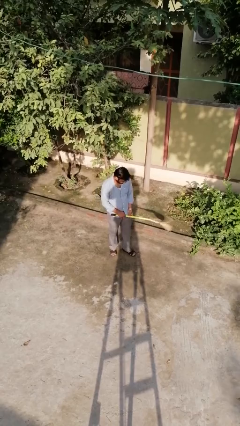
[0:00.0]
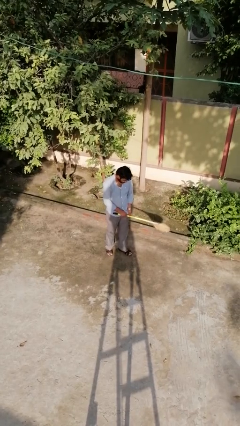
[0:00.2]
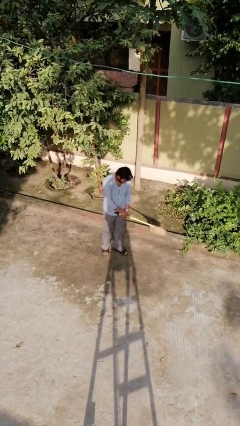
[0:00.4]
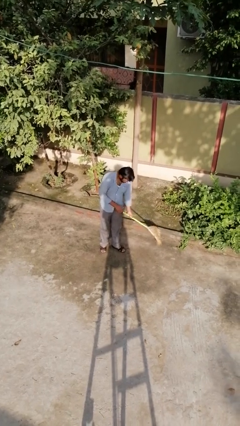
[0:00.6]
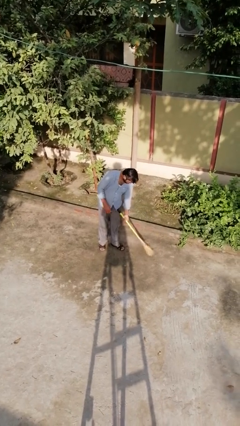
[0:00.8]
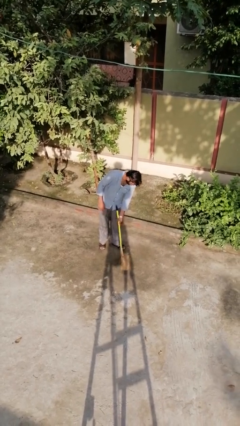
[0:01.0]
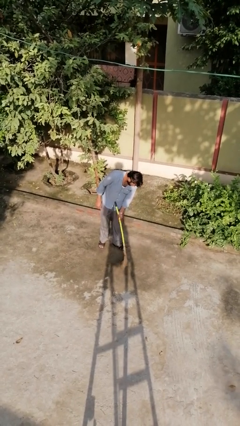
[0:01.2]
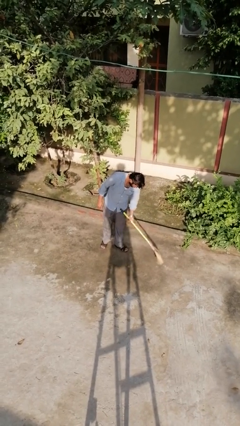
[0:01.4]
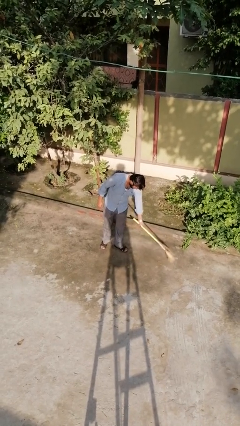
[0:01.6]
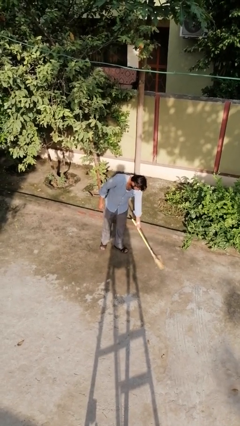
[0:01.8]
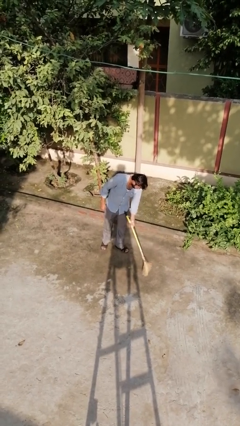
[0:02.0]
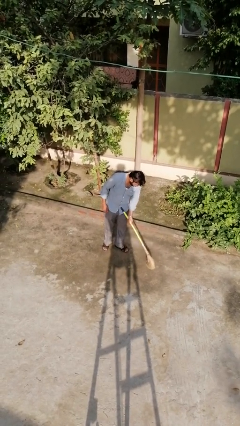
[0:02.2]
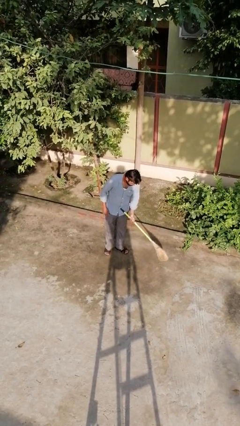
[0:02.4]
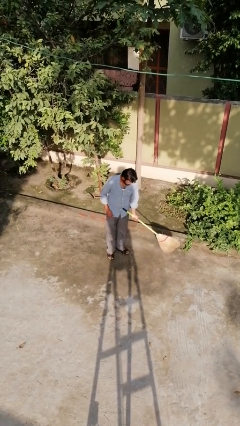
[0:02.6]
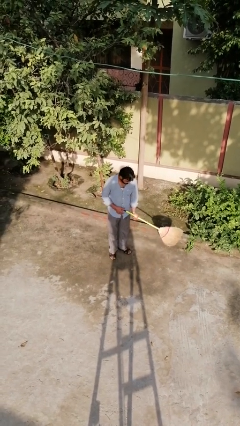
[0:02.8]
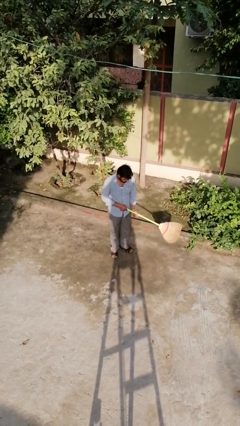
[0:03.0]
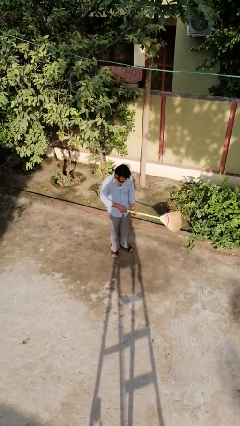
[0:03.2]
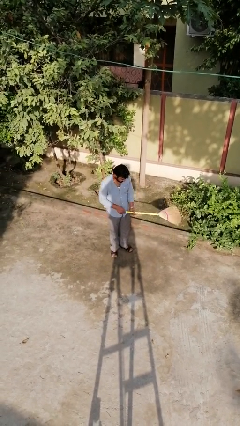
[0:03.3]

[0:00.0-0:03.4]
person sweeps floor

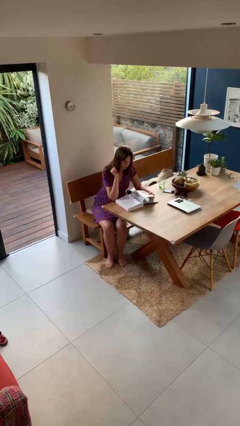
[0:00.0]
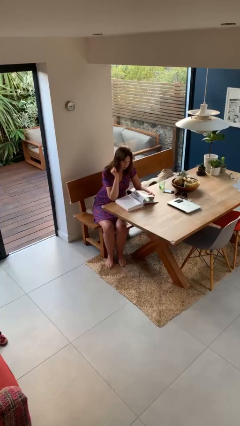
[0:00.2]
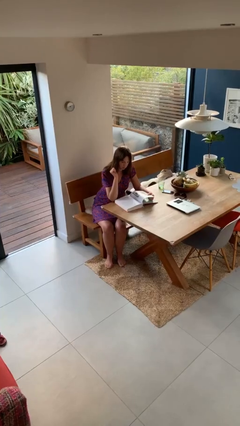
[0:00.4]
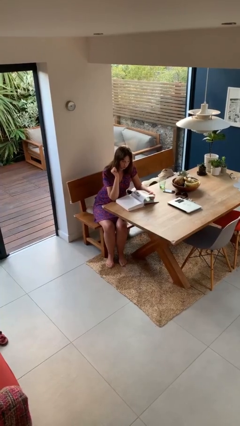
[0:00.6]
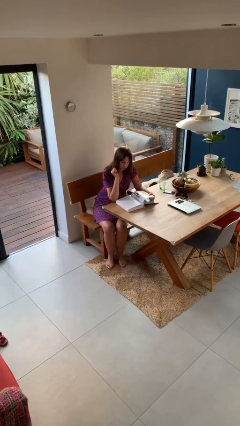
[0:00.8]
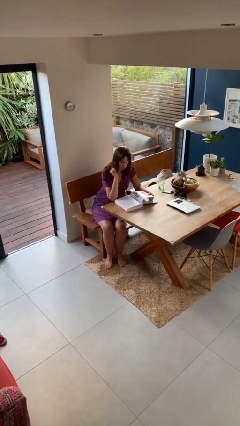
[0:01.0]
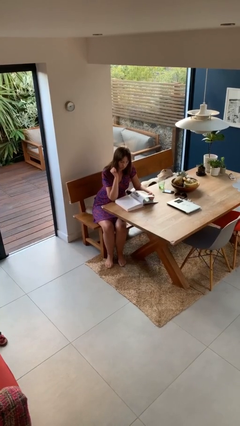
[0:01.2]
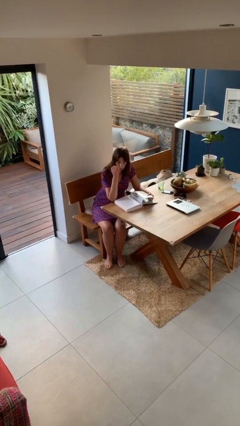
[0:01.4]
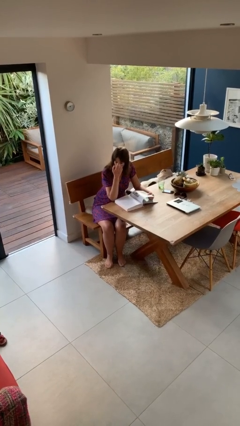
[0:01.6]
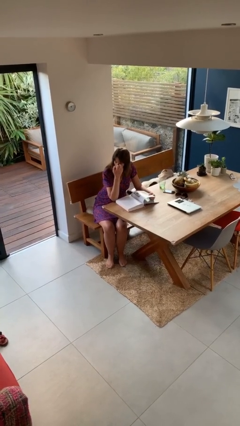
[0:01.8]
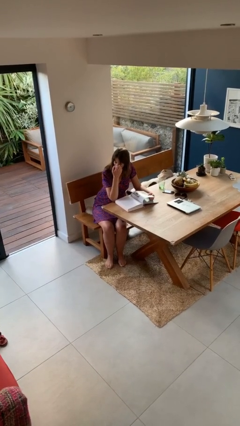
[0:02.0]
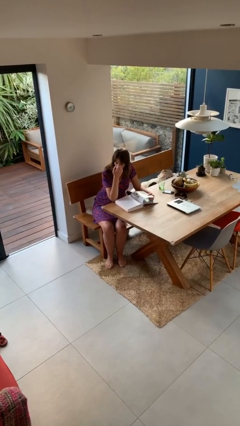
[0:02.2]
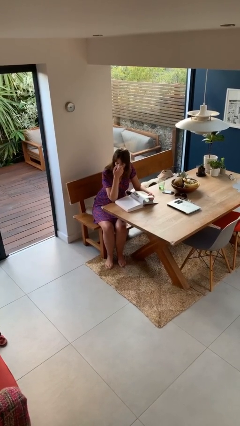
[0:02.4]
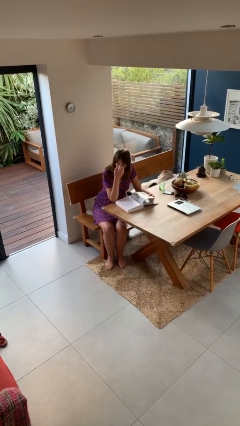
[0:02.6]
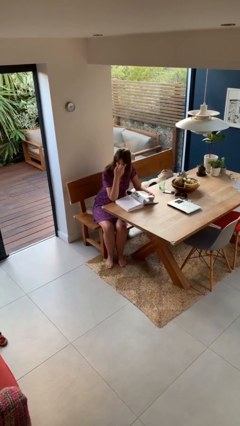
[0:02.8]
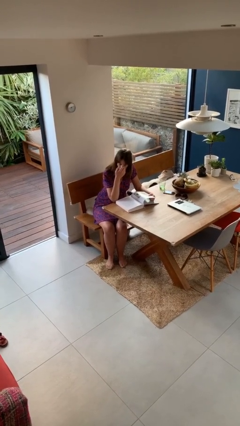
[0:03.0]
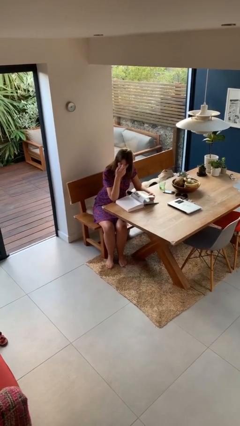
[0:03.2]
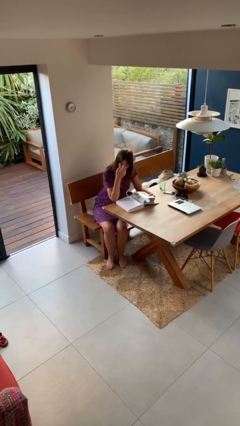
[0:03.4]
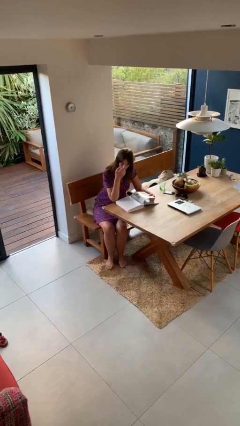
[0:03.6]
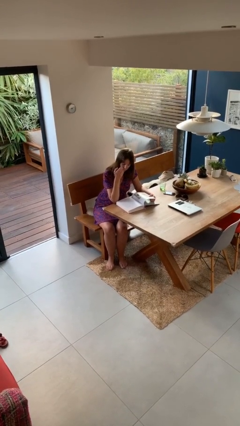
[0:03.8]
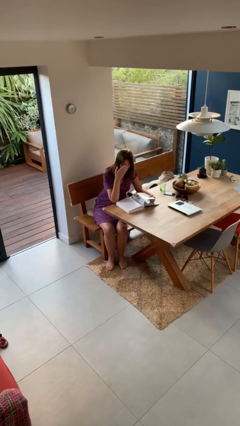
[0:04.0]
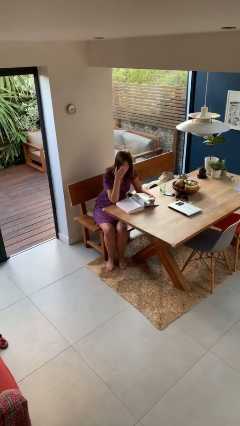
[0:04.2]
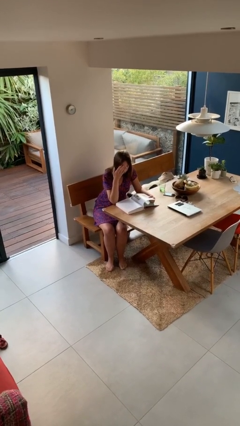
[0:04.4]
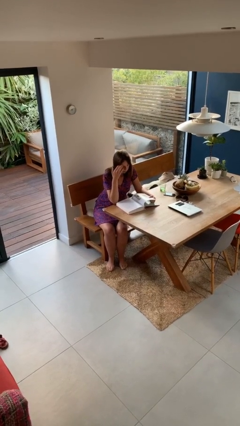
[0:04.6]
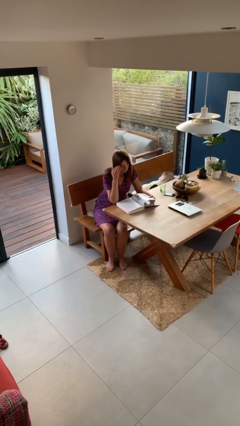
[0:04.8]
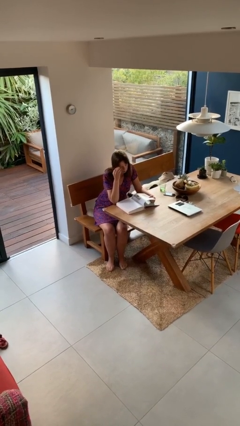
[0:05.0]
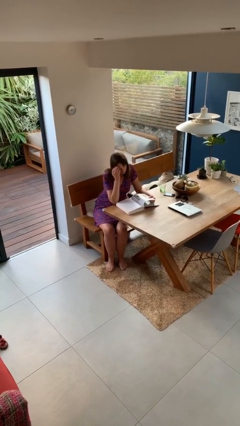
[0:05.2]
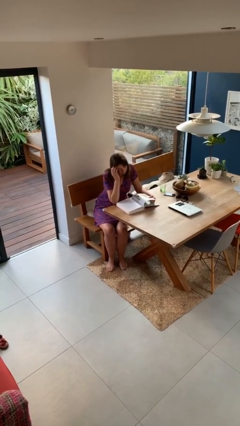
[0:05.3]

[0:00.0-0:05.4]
person reads document

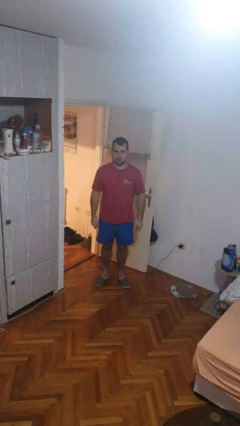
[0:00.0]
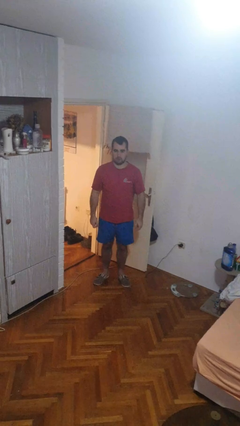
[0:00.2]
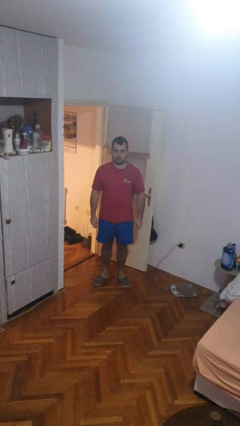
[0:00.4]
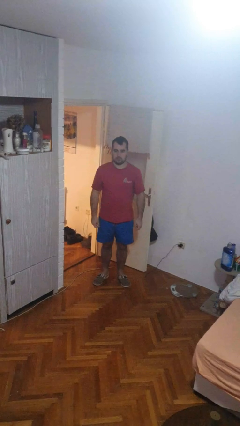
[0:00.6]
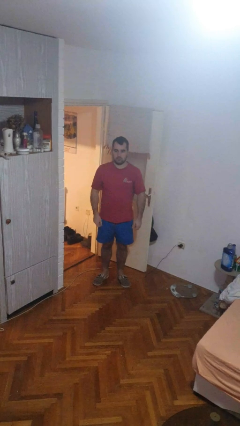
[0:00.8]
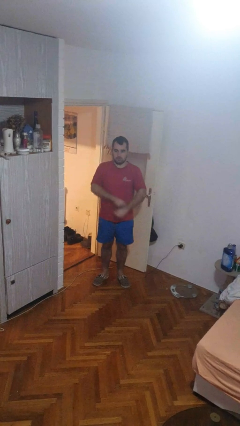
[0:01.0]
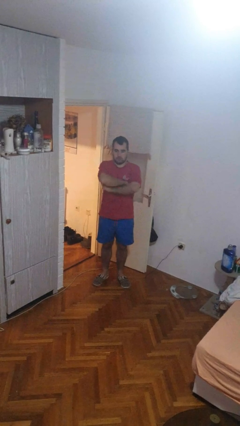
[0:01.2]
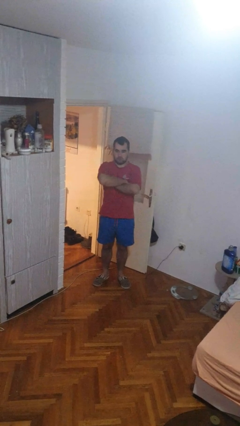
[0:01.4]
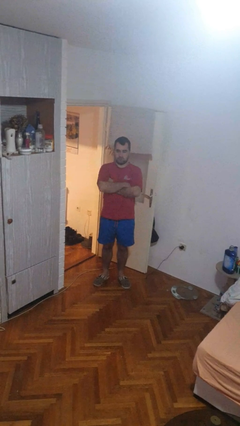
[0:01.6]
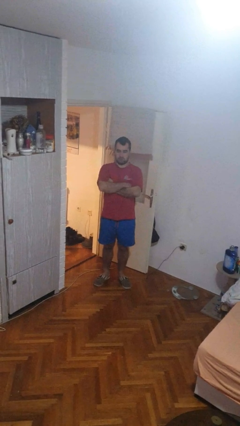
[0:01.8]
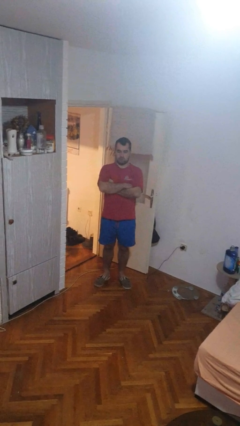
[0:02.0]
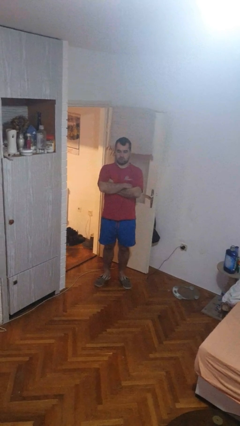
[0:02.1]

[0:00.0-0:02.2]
person crosses arms

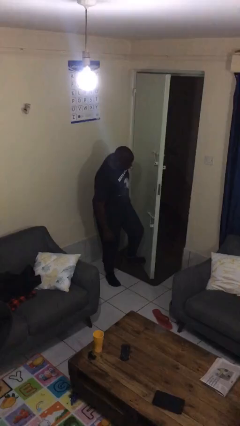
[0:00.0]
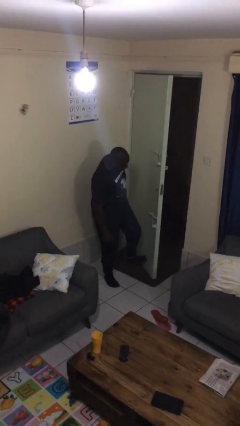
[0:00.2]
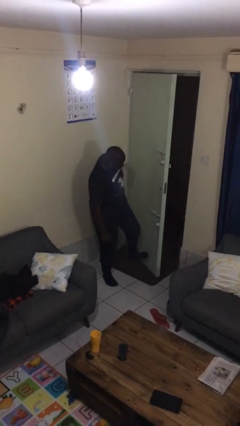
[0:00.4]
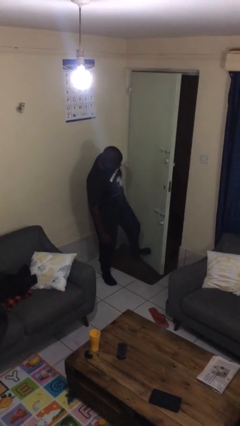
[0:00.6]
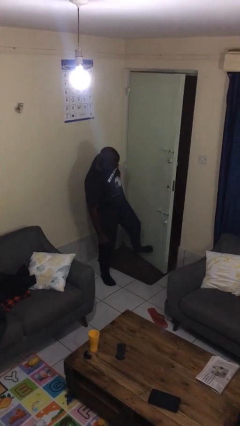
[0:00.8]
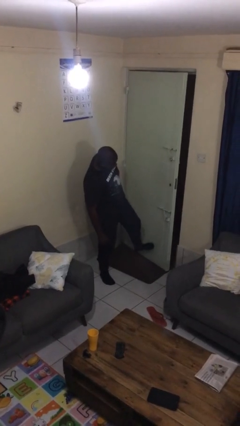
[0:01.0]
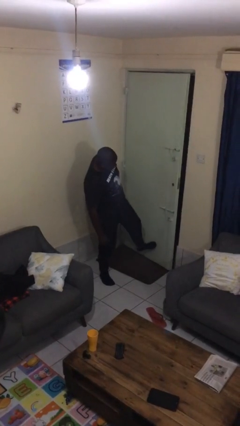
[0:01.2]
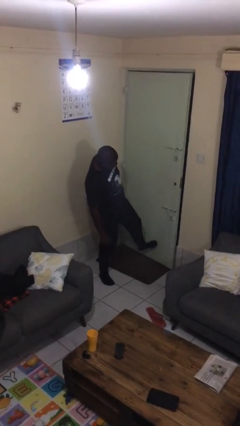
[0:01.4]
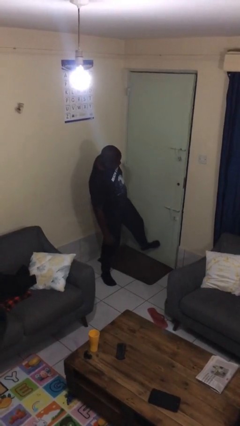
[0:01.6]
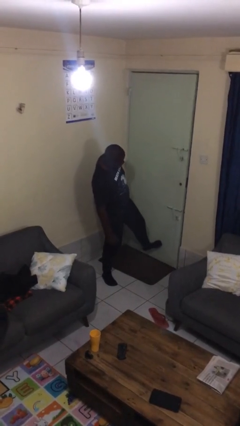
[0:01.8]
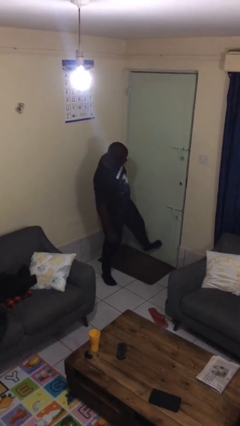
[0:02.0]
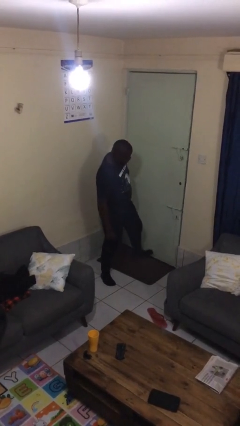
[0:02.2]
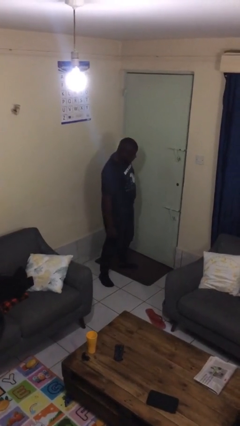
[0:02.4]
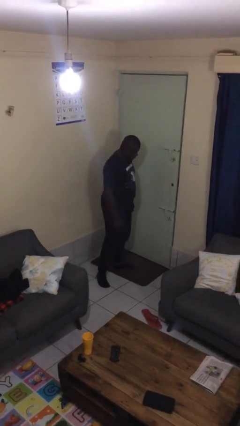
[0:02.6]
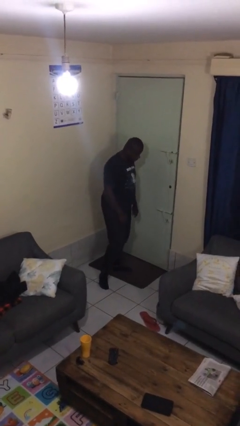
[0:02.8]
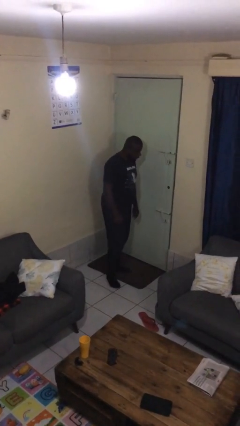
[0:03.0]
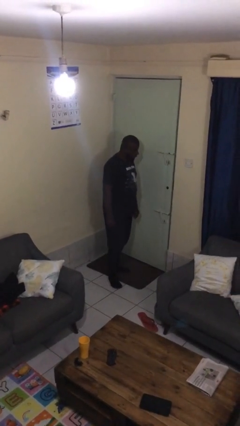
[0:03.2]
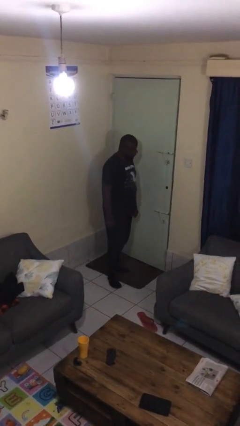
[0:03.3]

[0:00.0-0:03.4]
person closes door with foot

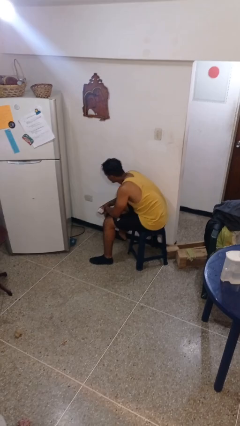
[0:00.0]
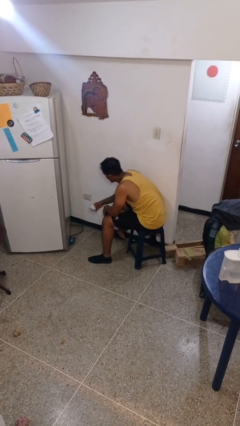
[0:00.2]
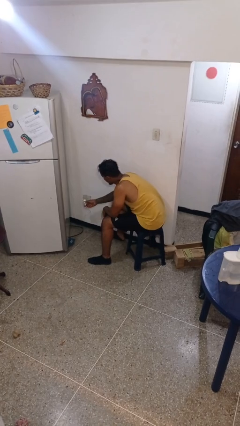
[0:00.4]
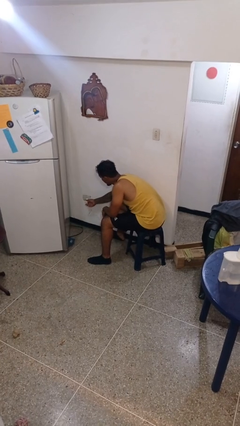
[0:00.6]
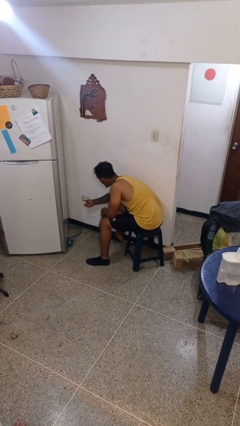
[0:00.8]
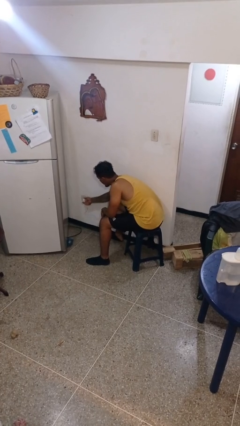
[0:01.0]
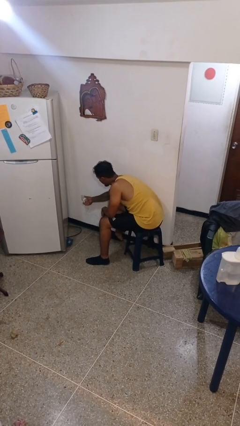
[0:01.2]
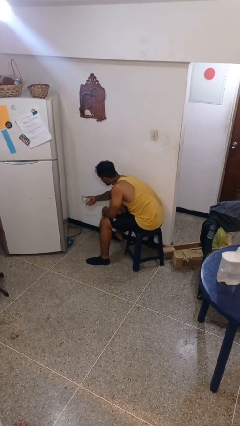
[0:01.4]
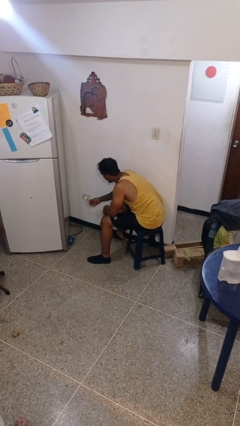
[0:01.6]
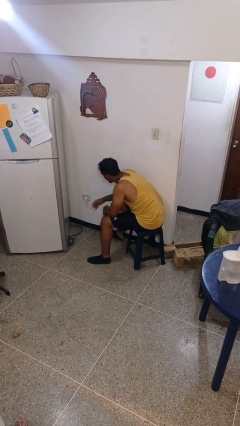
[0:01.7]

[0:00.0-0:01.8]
person plugs into electrical socket

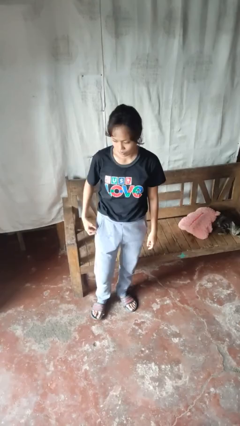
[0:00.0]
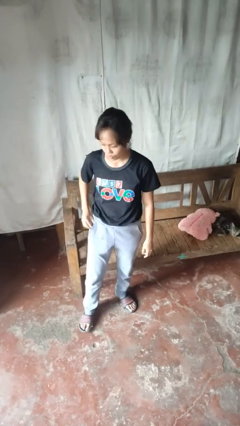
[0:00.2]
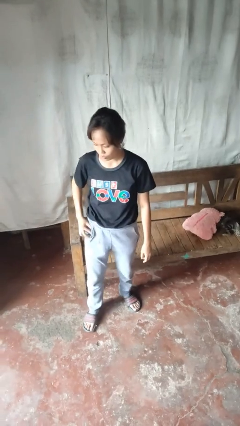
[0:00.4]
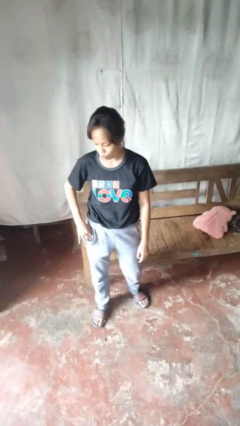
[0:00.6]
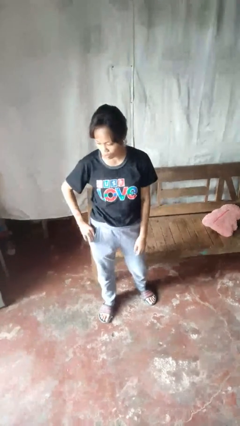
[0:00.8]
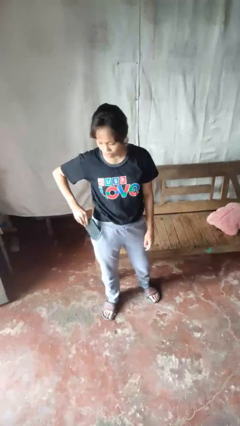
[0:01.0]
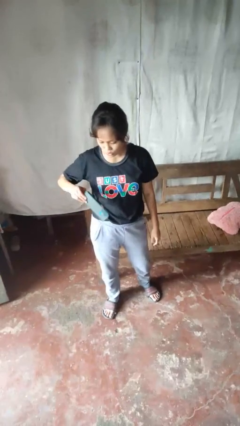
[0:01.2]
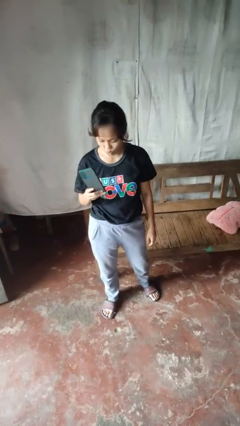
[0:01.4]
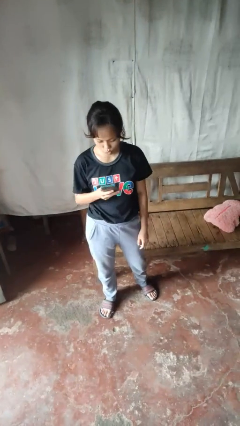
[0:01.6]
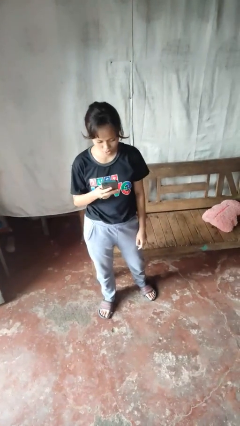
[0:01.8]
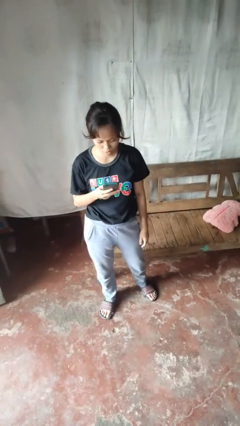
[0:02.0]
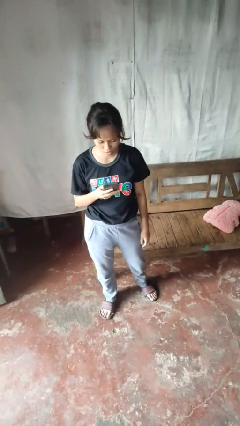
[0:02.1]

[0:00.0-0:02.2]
person takes phone from pocket
